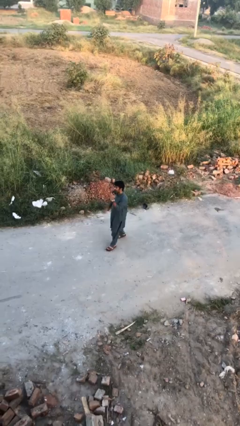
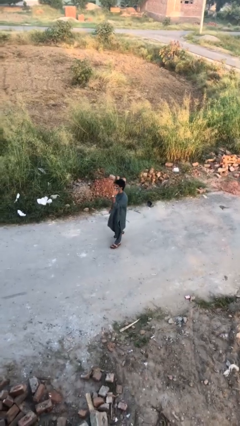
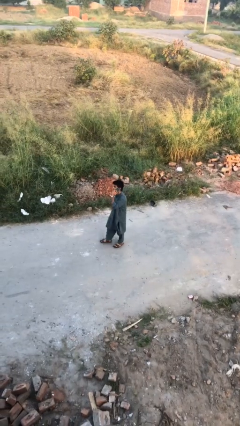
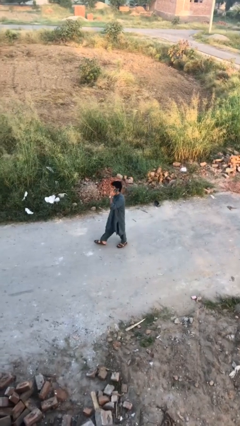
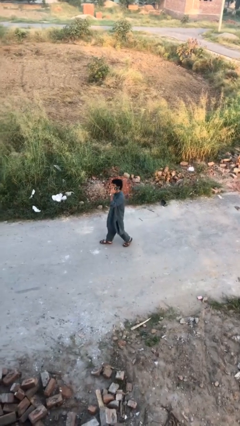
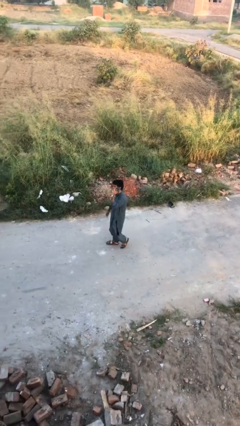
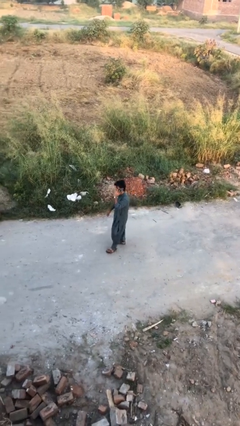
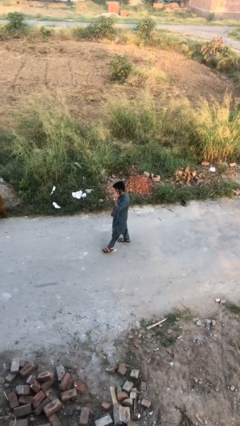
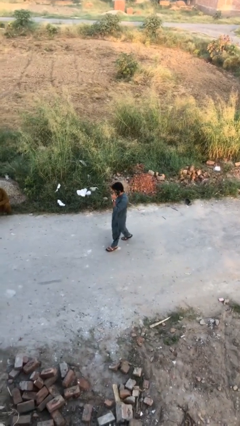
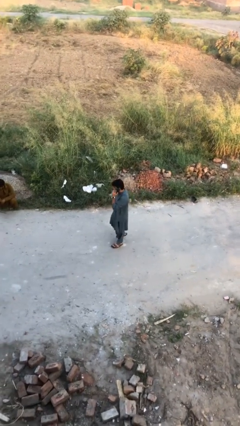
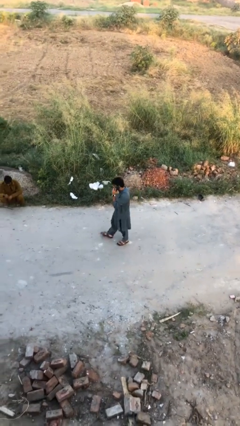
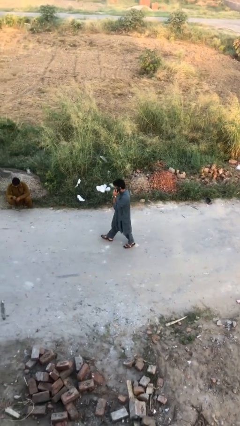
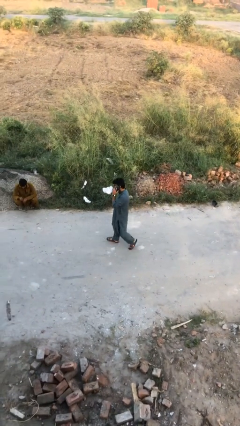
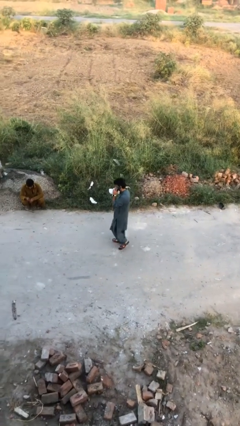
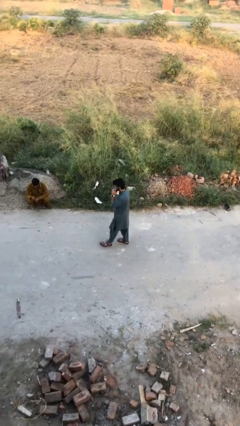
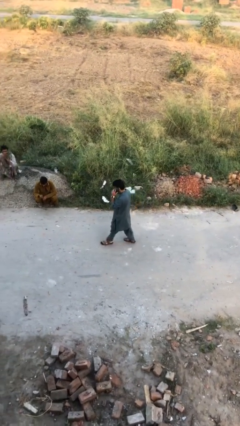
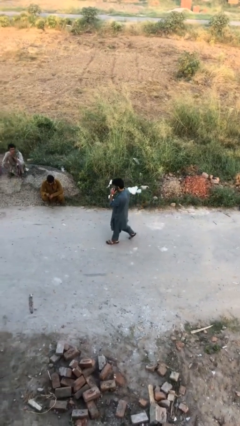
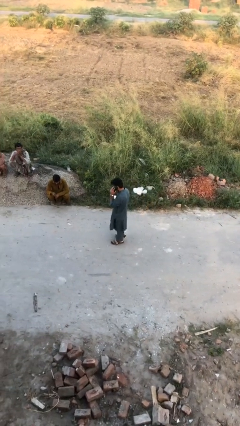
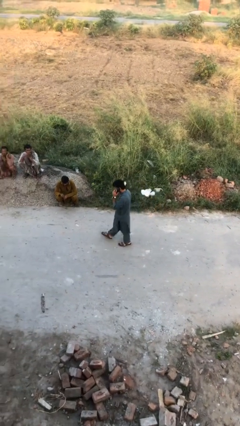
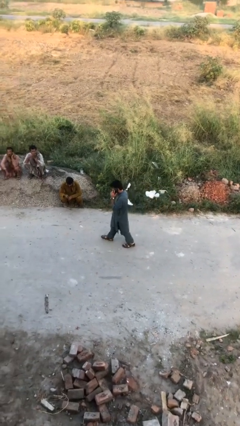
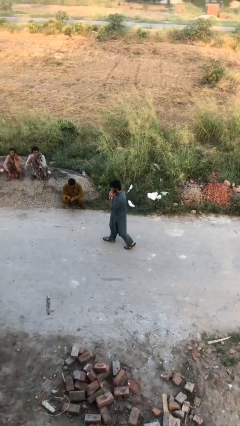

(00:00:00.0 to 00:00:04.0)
person talks on phone

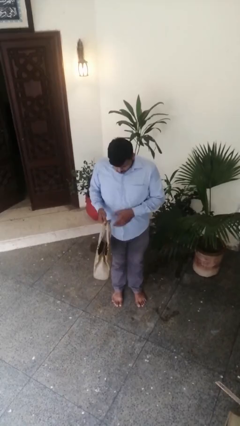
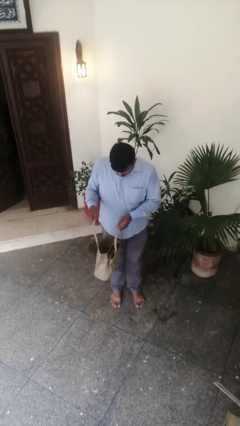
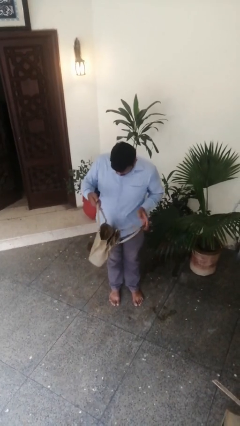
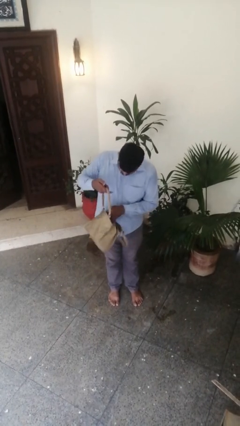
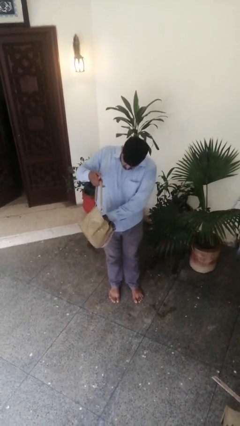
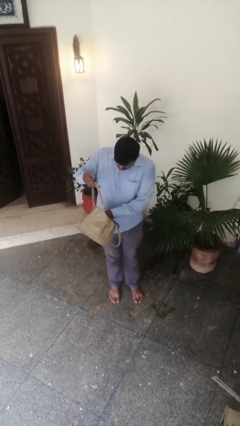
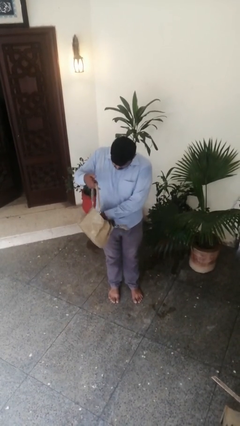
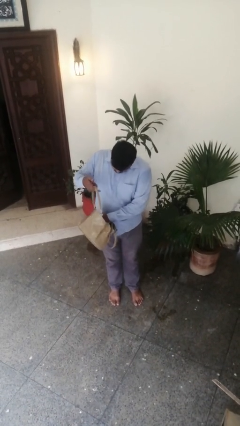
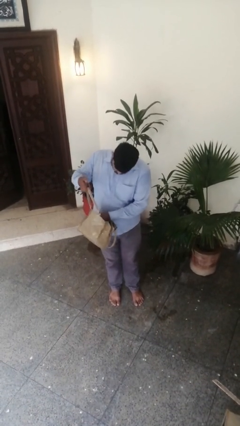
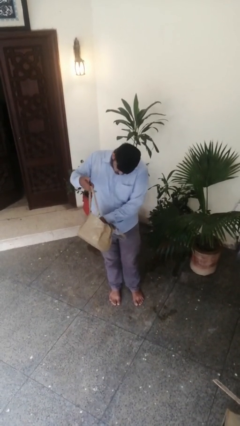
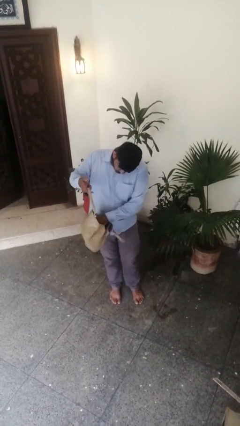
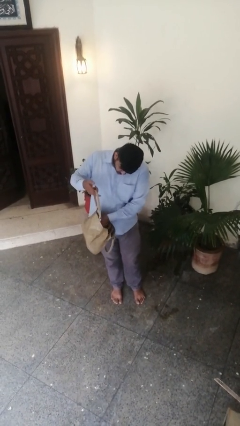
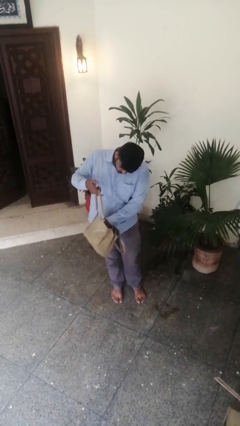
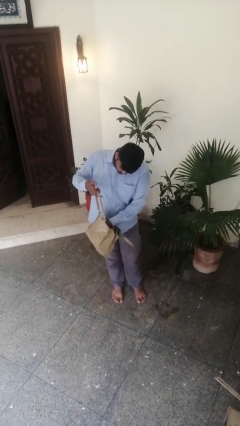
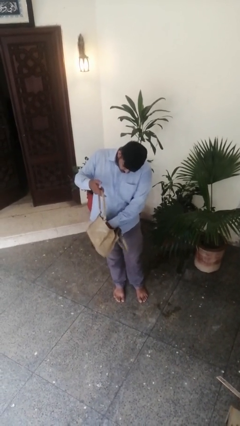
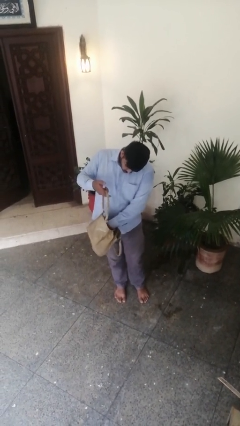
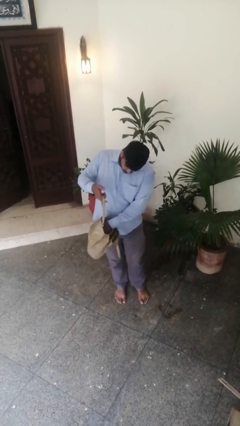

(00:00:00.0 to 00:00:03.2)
person searches in purse

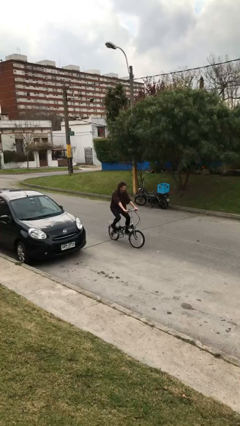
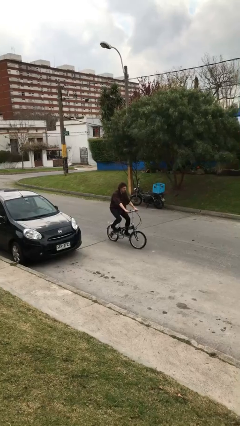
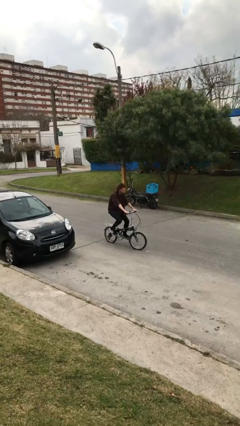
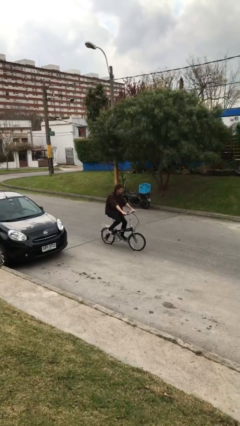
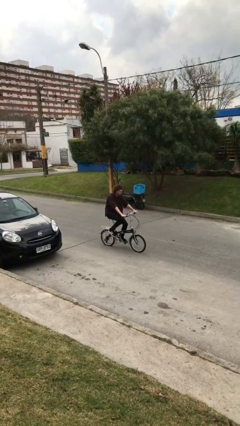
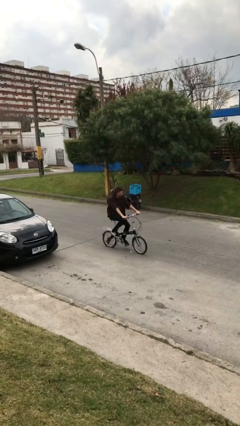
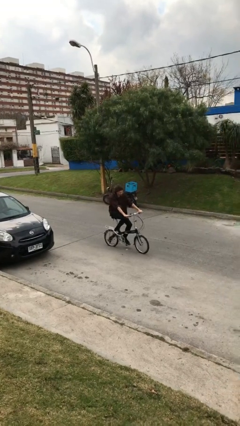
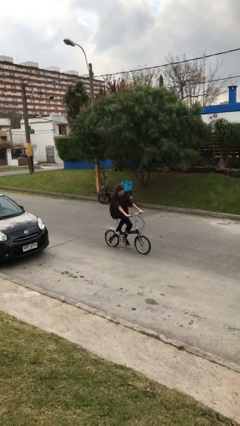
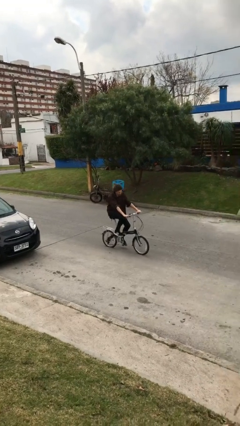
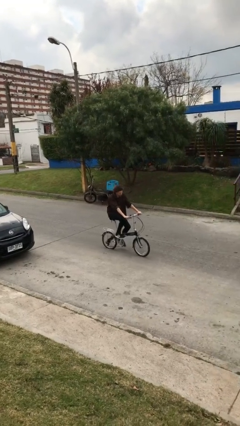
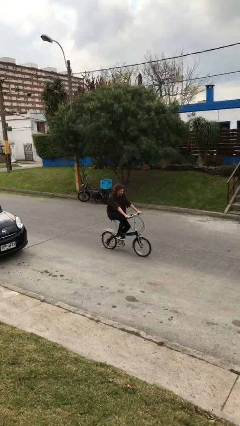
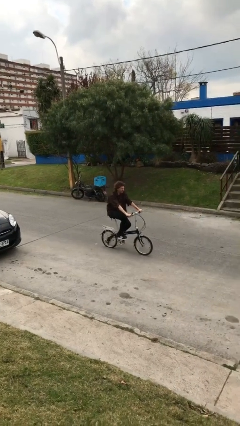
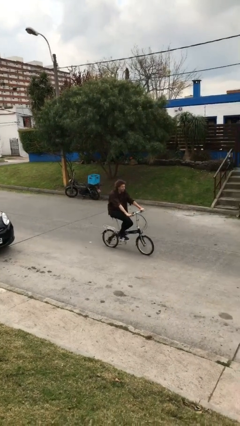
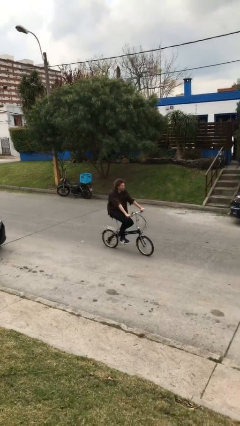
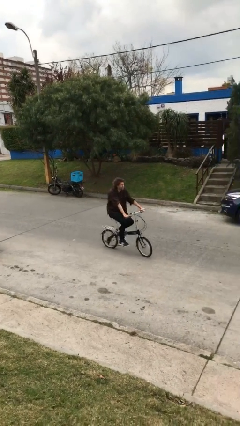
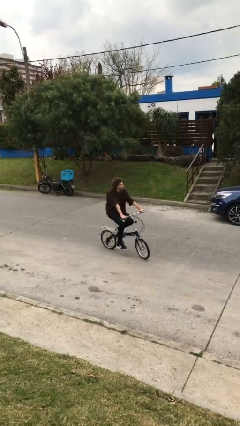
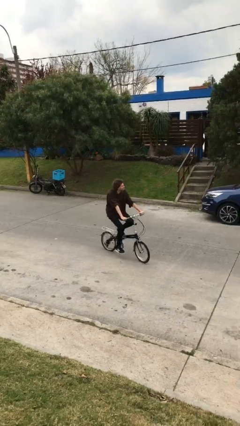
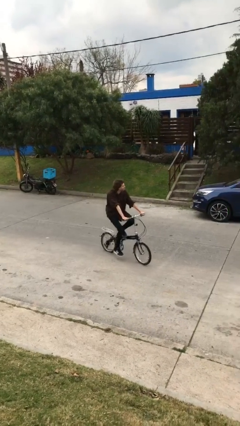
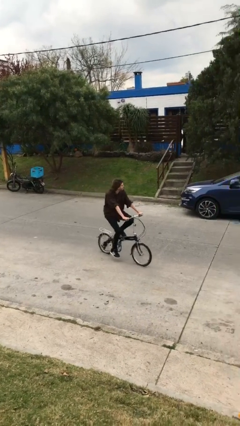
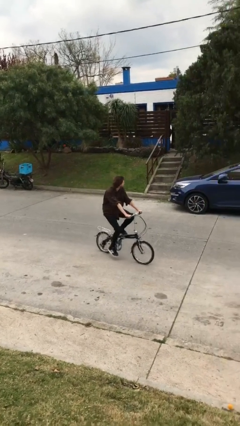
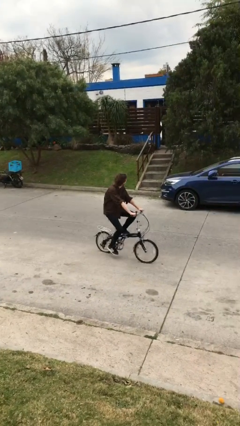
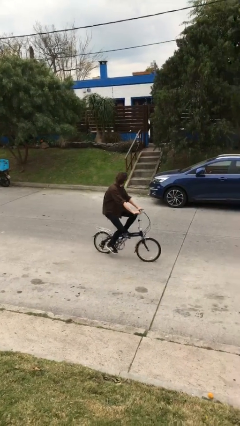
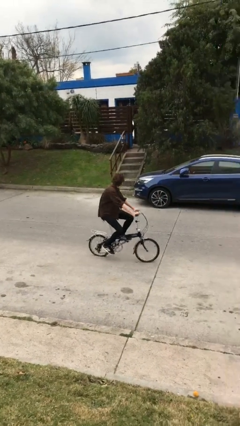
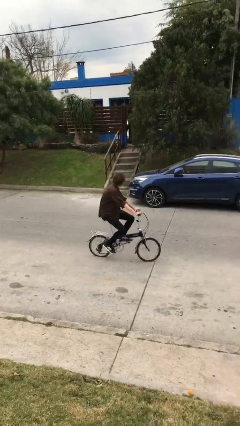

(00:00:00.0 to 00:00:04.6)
person rides bicycle

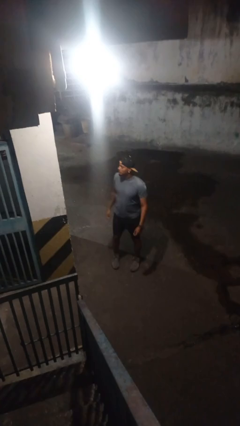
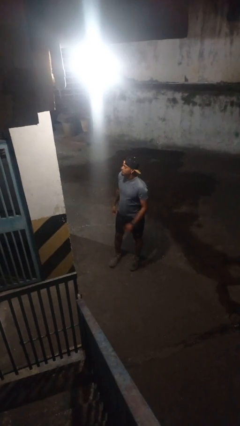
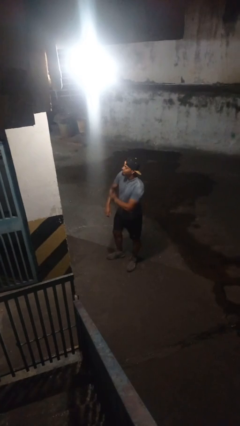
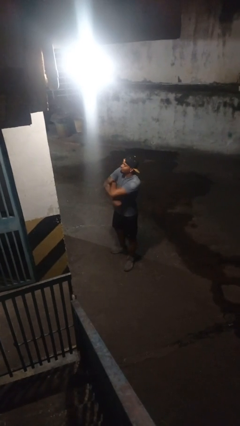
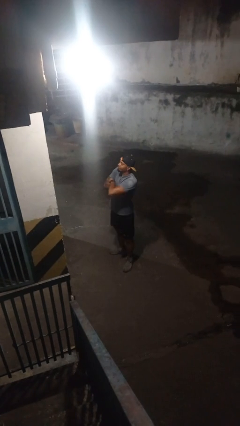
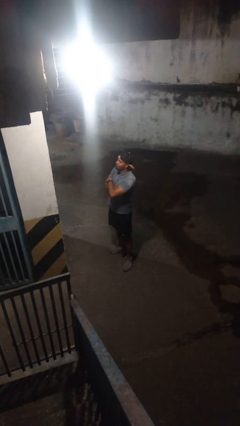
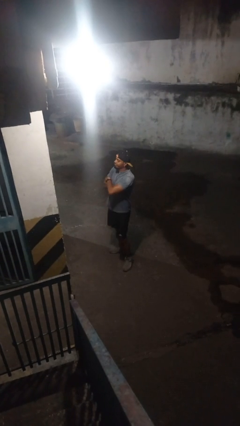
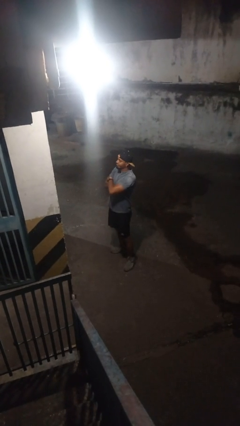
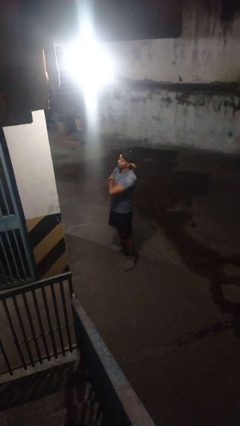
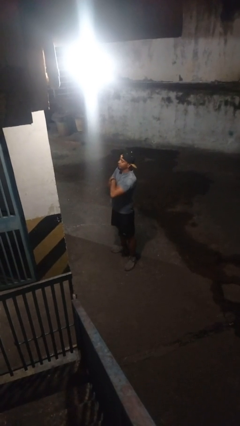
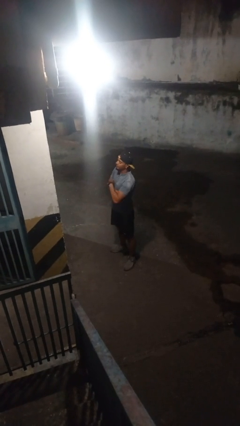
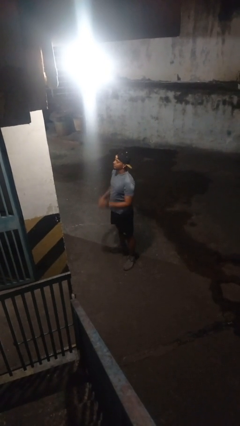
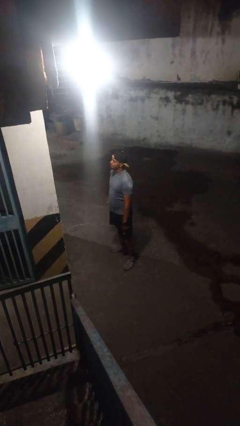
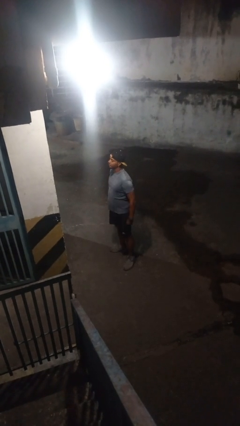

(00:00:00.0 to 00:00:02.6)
person crosses arms

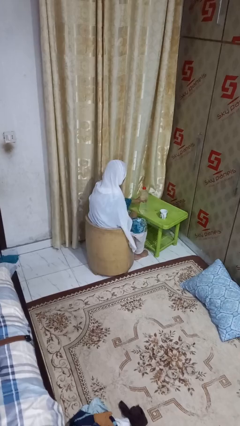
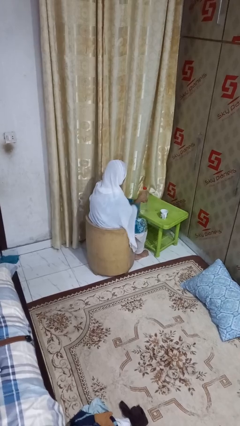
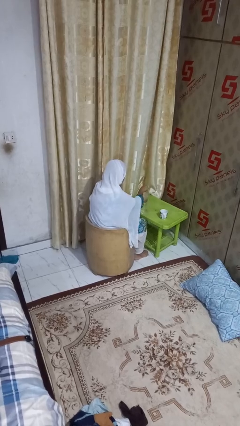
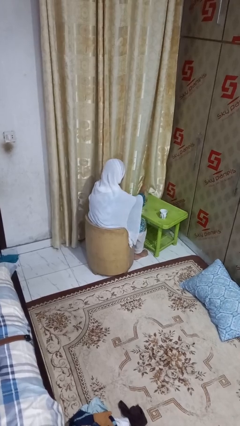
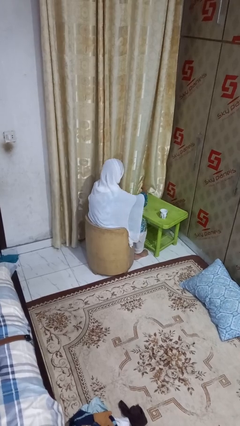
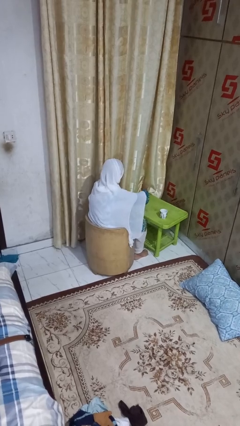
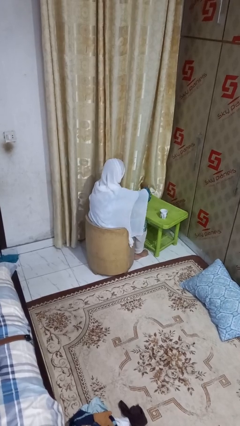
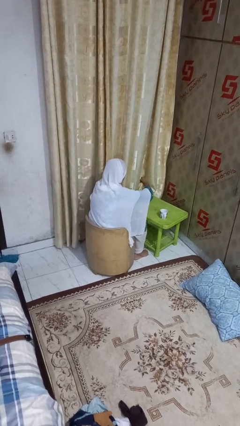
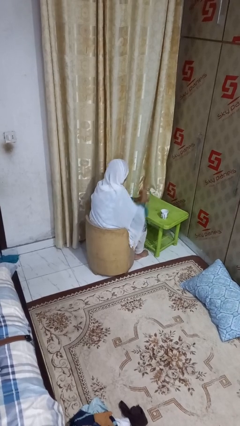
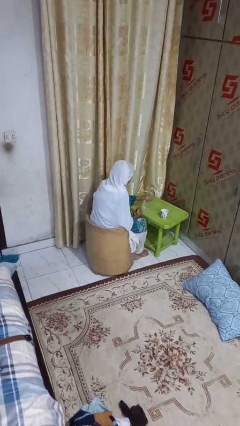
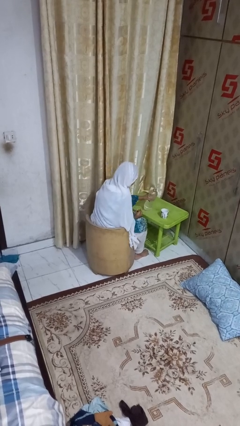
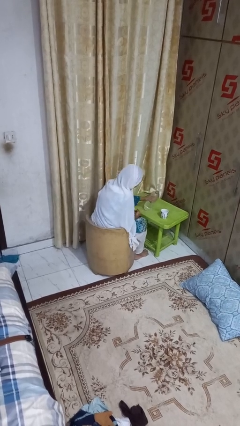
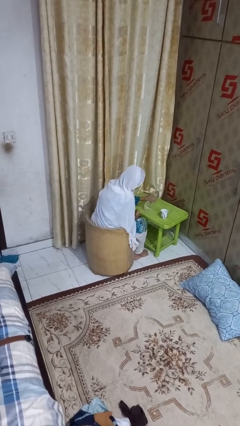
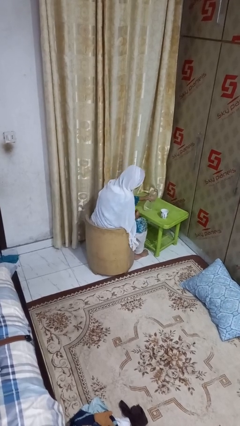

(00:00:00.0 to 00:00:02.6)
person unscrews lid from bottle
